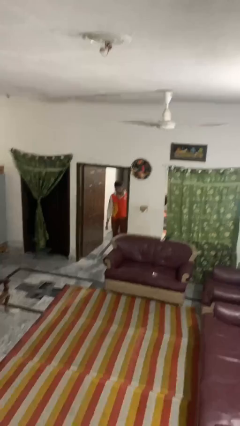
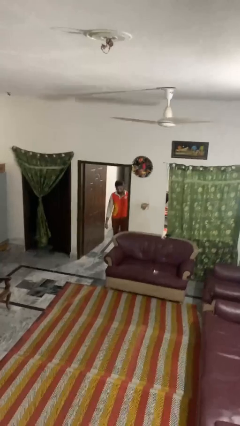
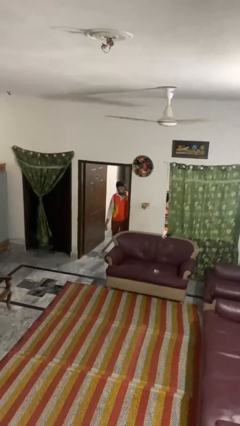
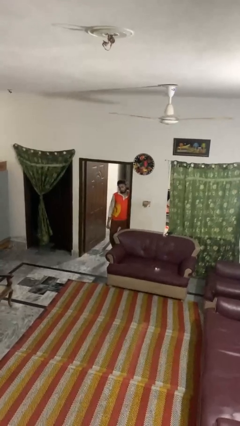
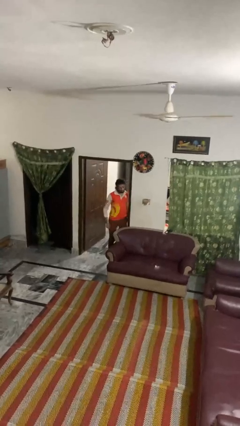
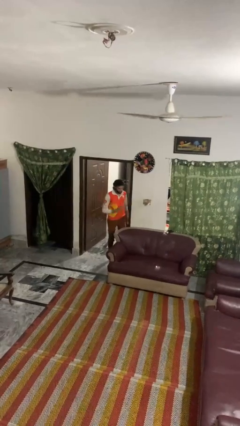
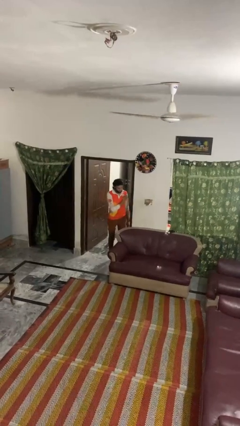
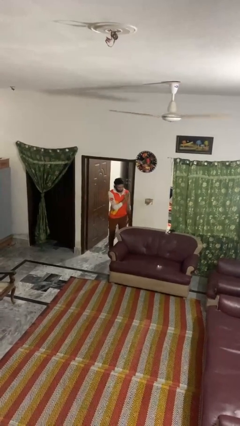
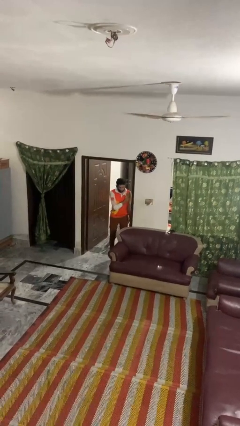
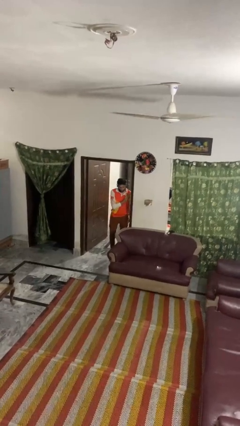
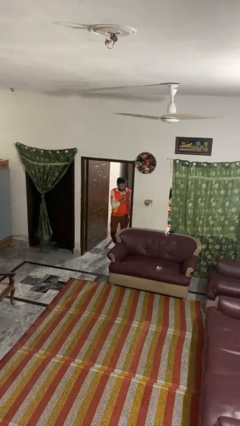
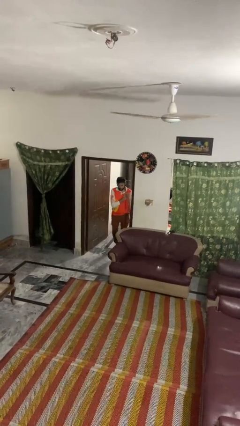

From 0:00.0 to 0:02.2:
person bumps into wall

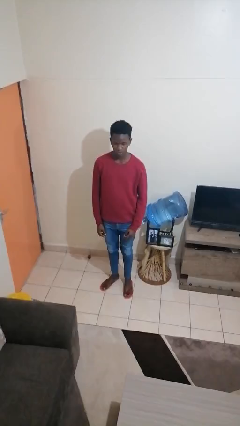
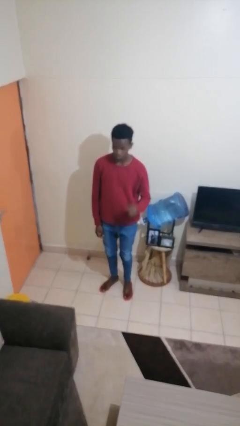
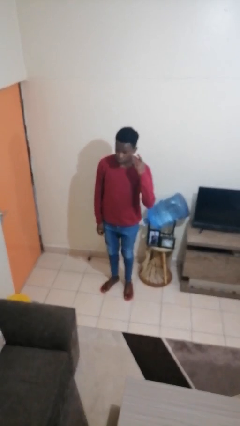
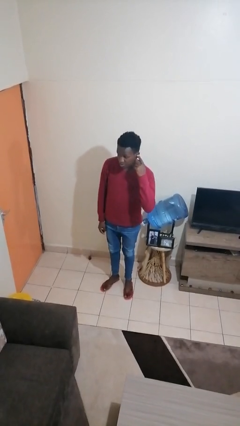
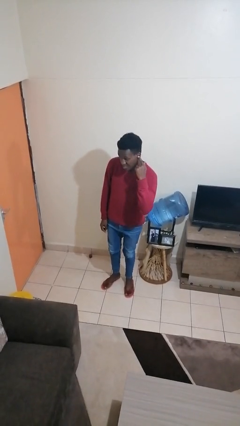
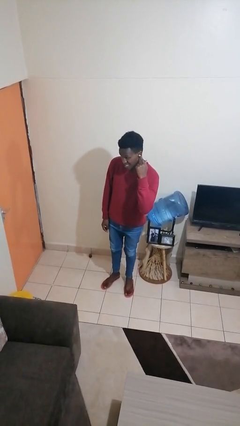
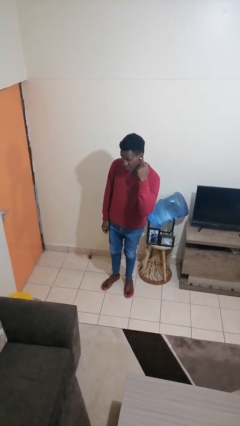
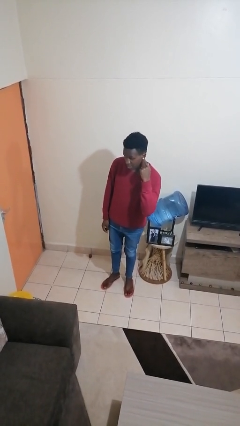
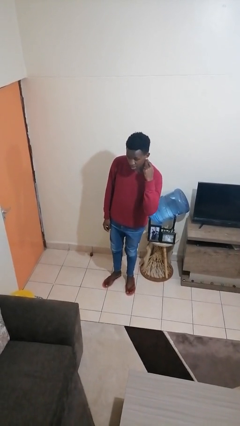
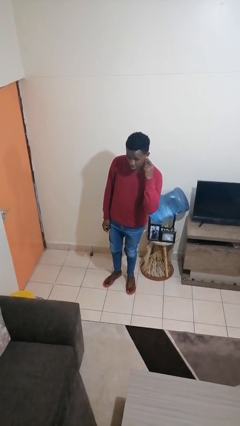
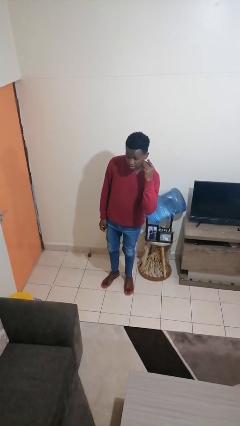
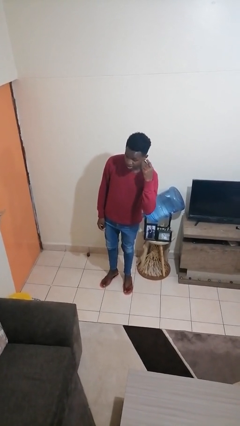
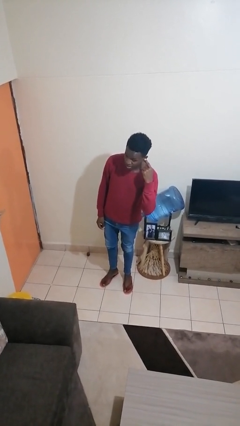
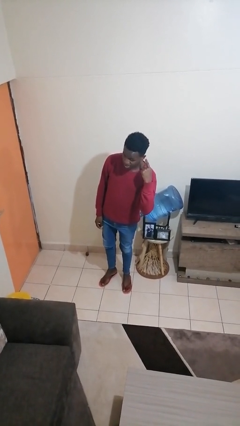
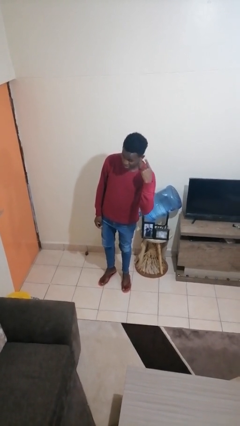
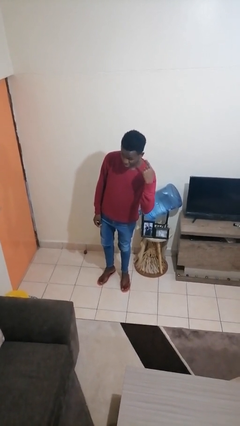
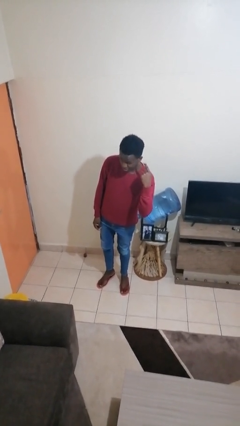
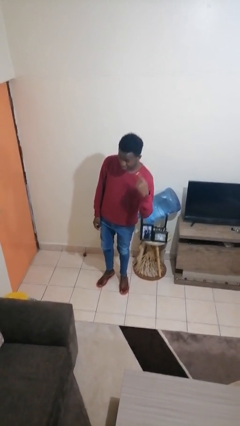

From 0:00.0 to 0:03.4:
person gestures listen closely

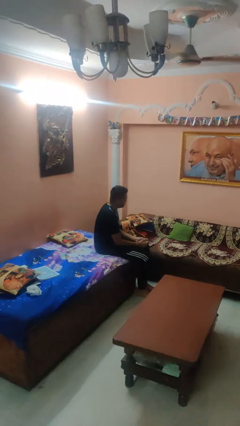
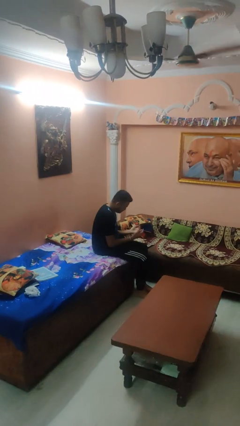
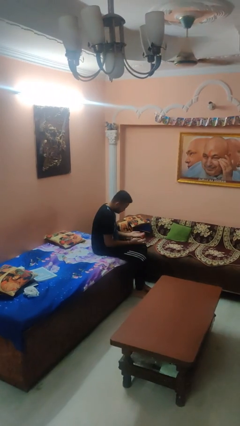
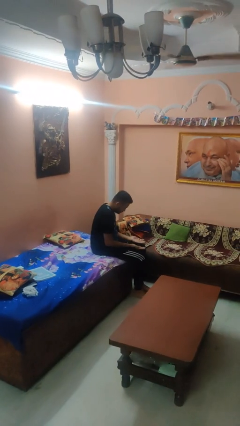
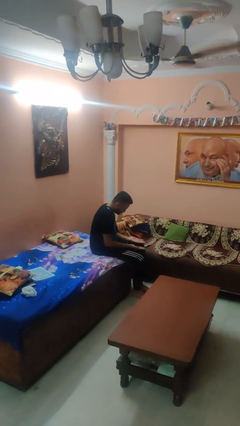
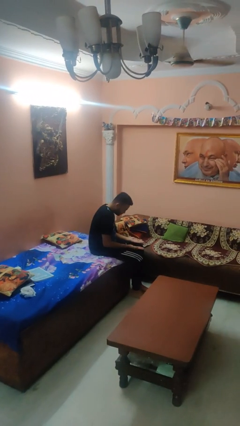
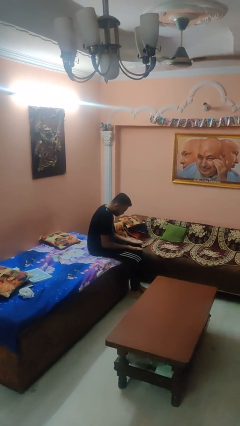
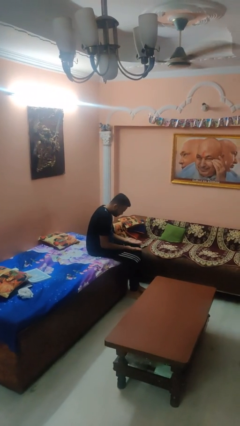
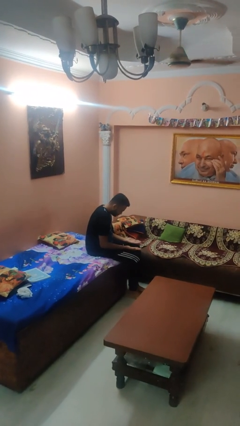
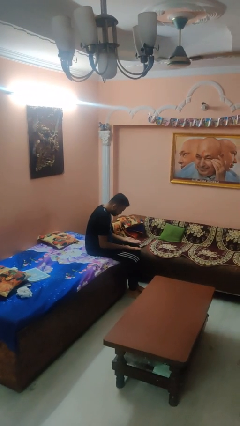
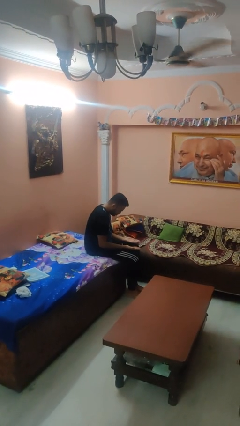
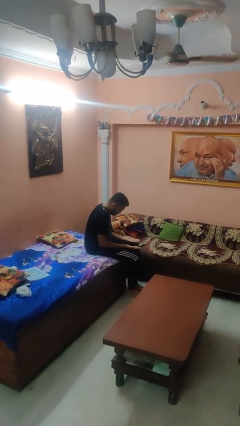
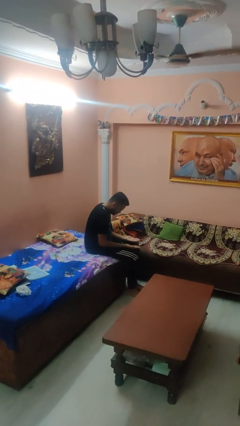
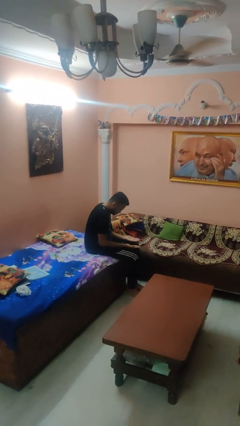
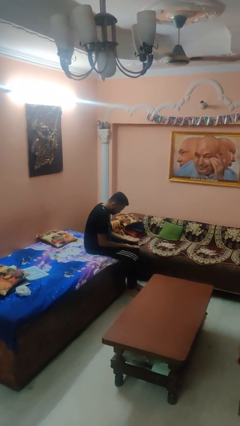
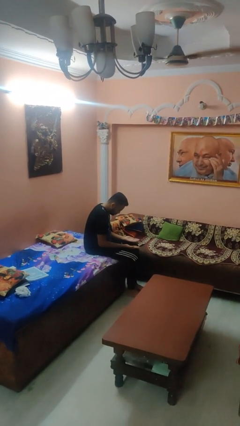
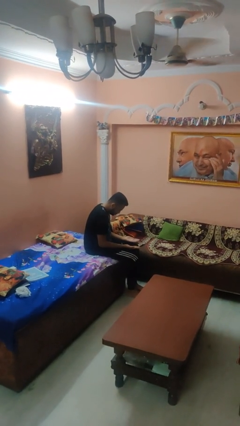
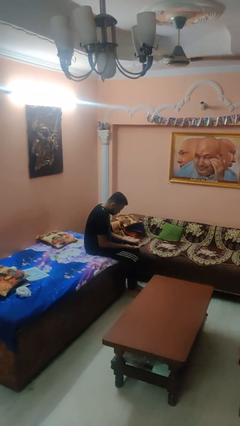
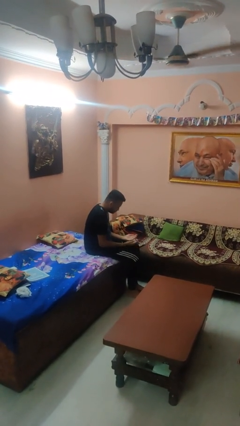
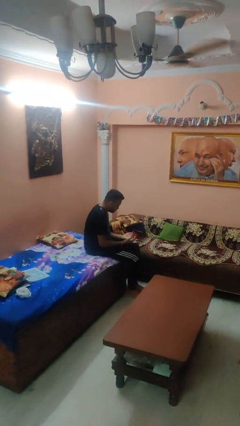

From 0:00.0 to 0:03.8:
person looks at hands in lap

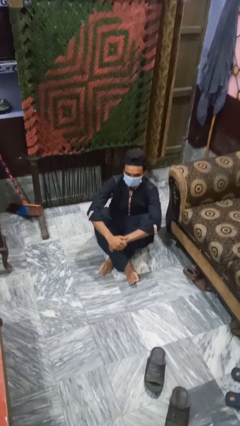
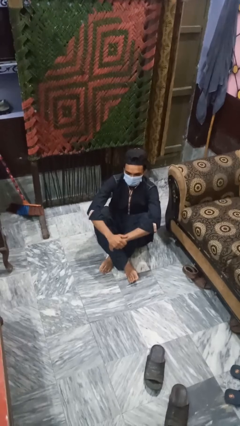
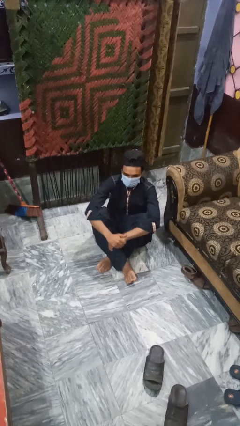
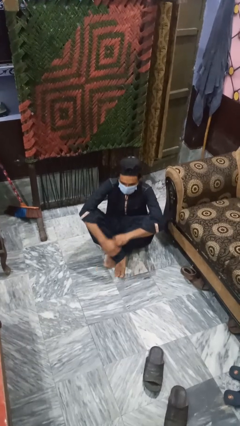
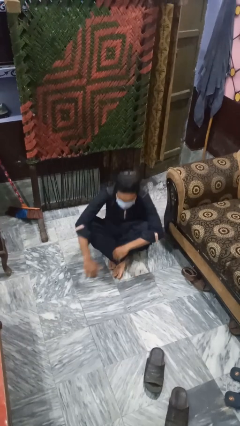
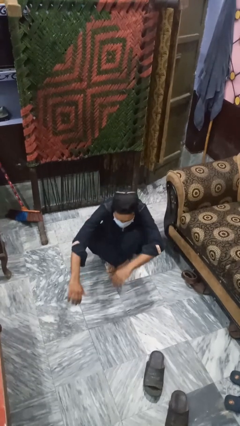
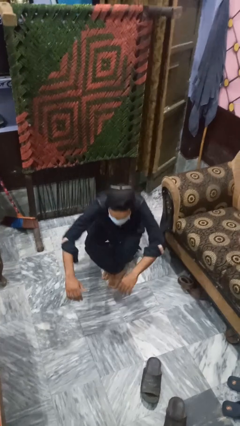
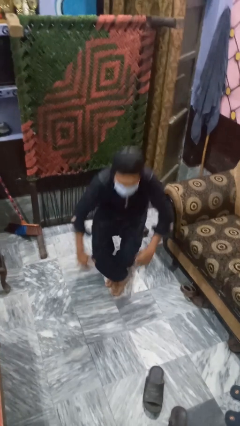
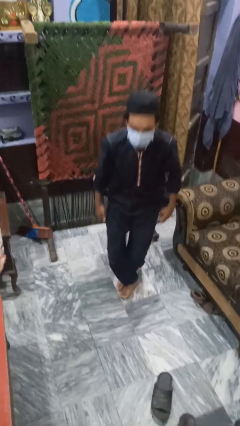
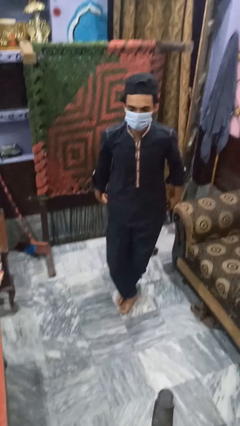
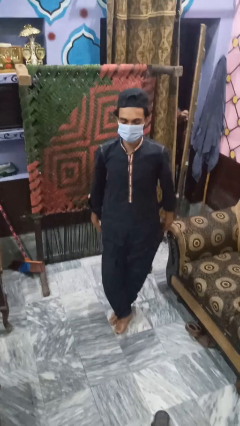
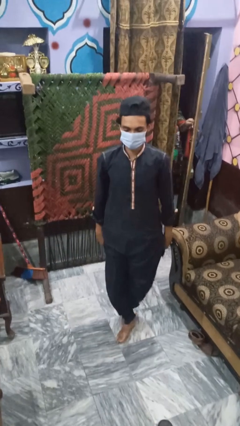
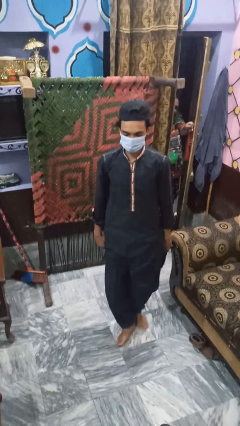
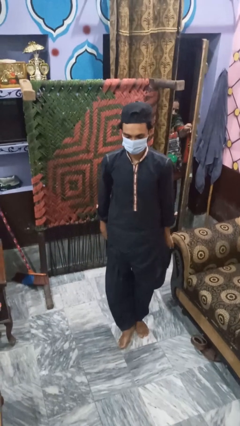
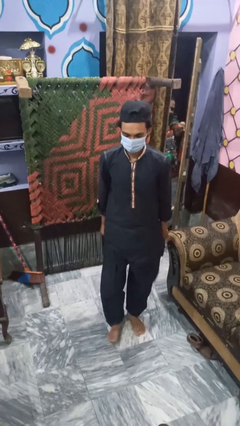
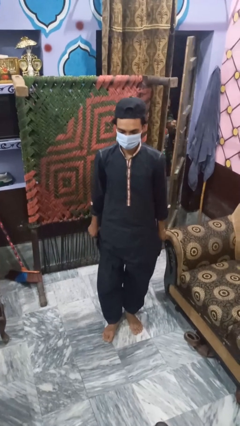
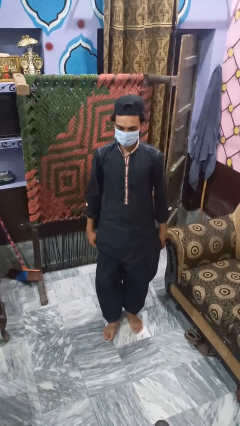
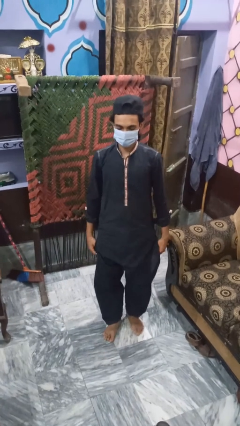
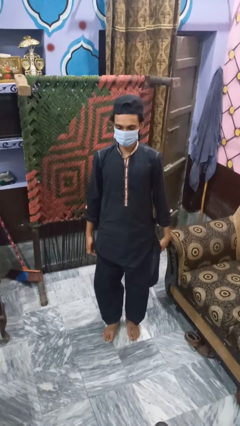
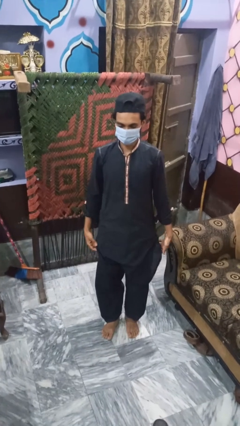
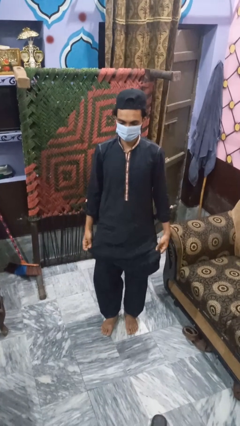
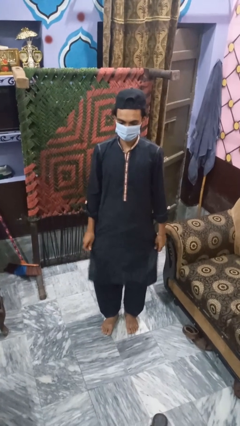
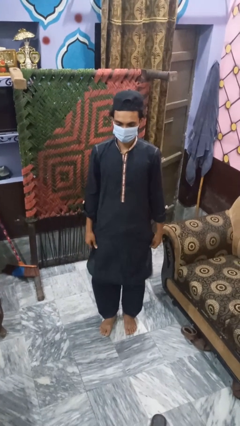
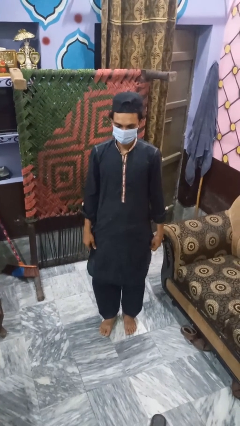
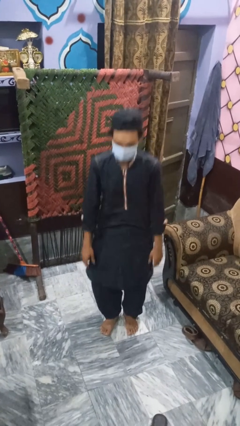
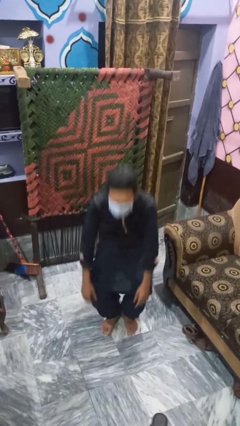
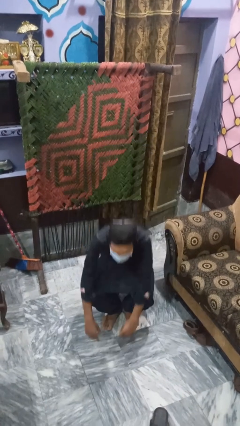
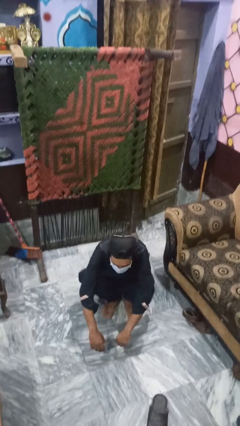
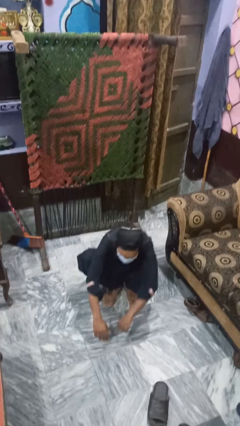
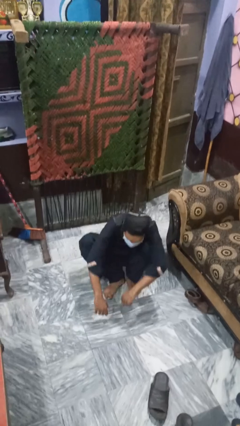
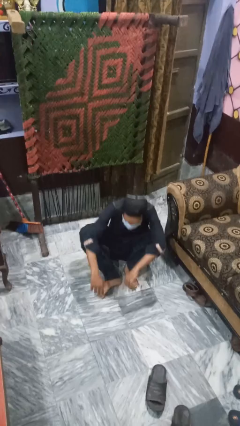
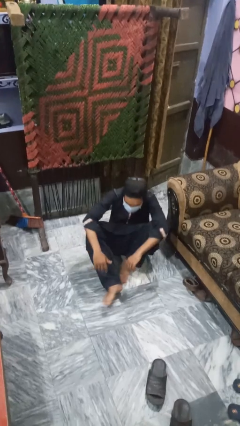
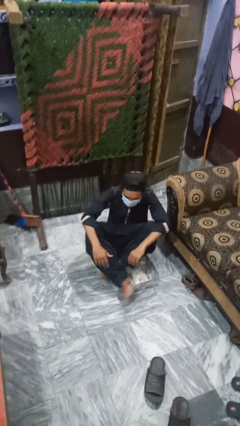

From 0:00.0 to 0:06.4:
person stands up from floor

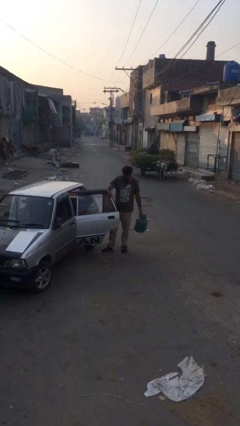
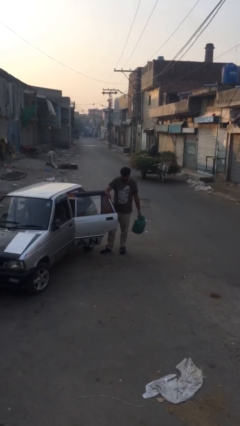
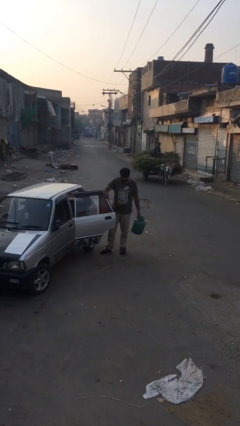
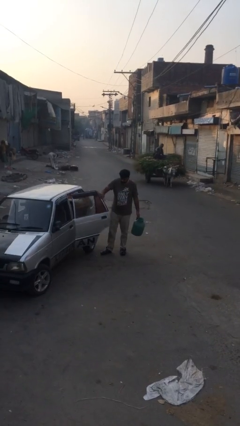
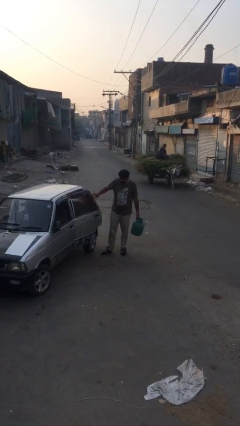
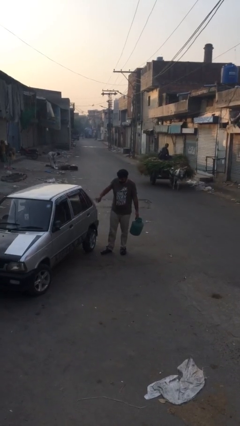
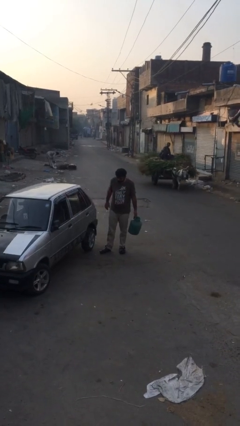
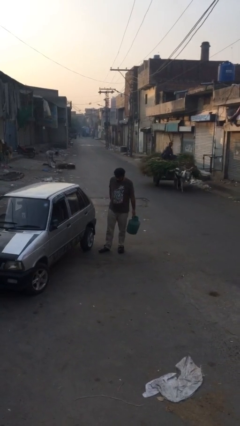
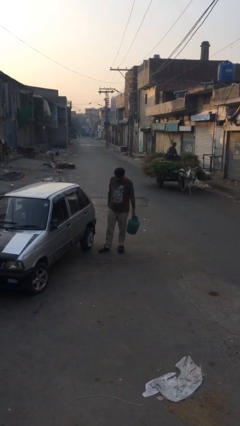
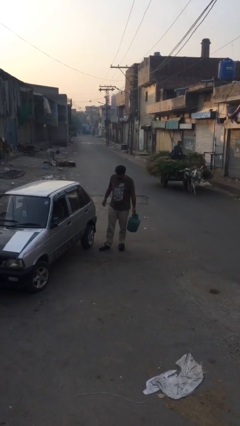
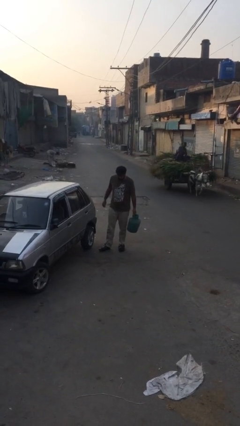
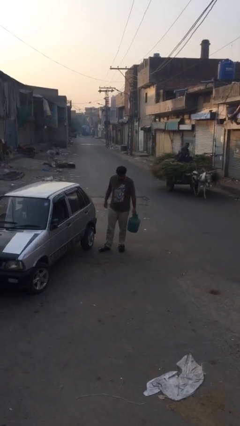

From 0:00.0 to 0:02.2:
person closes car door
